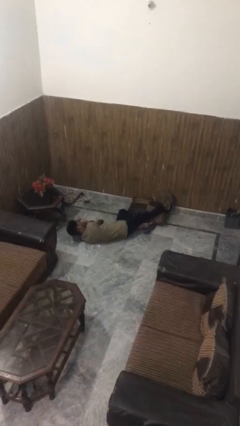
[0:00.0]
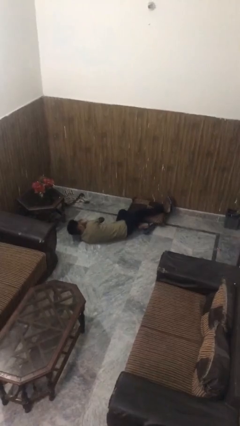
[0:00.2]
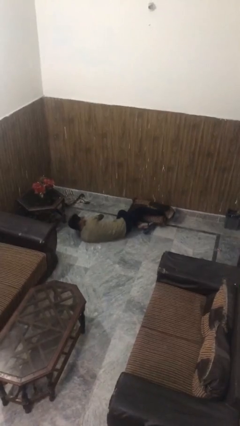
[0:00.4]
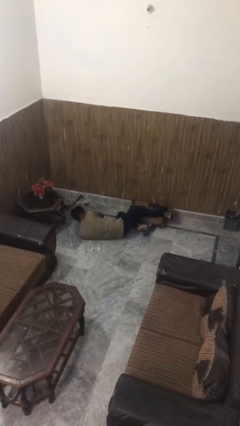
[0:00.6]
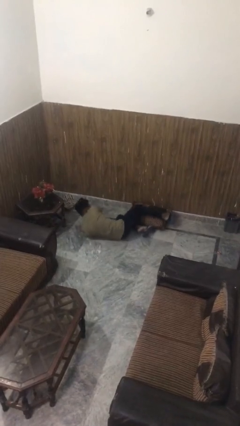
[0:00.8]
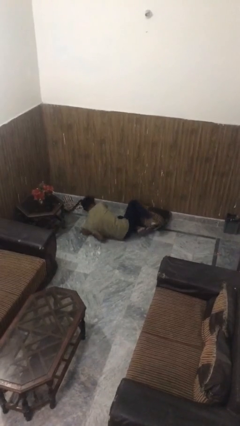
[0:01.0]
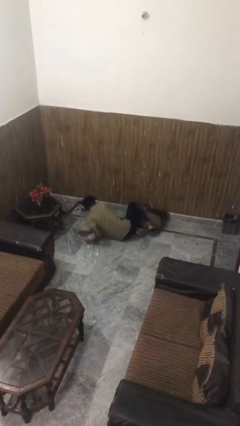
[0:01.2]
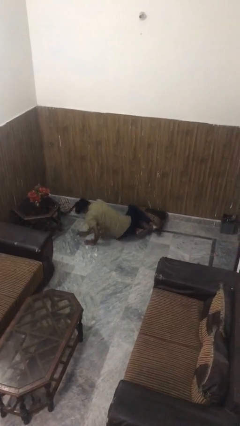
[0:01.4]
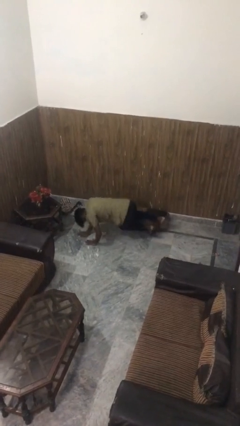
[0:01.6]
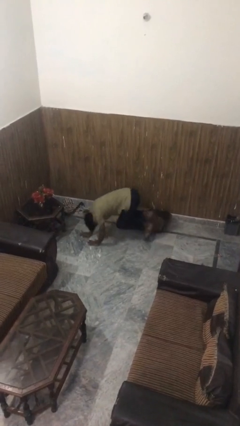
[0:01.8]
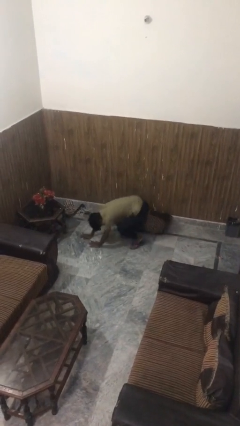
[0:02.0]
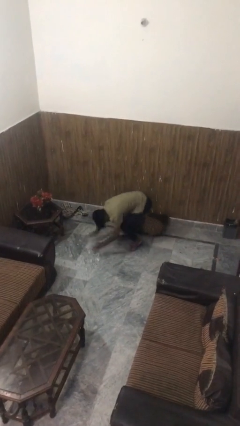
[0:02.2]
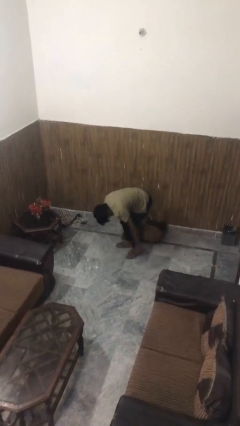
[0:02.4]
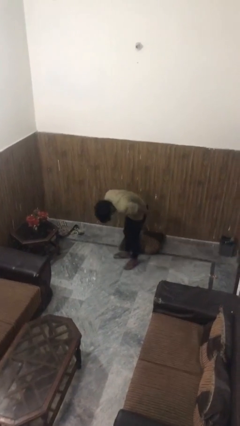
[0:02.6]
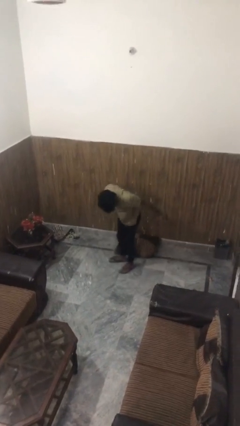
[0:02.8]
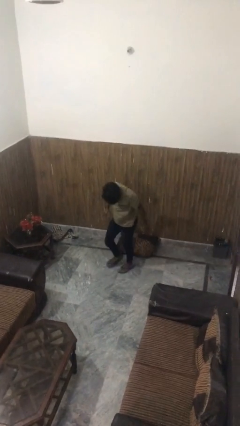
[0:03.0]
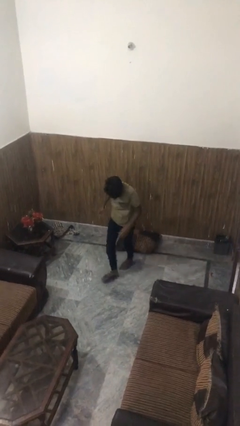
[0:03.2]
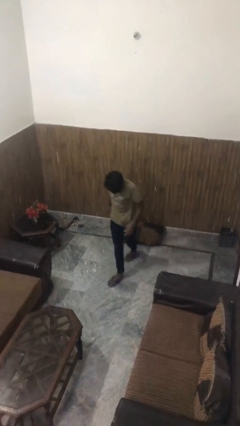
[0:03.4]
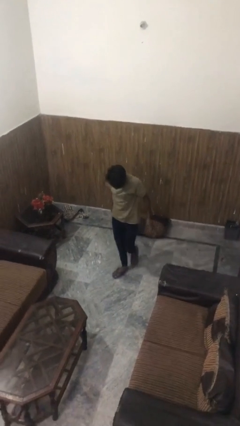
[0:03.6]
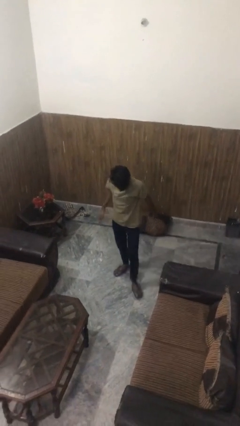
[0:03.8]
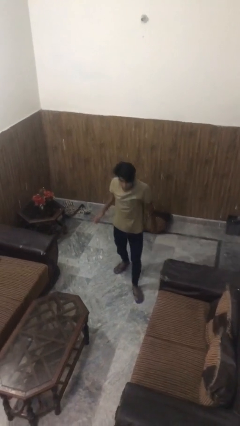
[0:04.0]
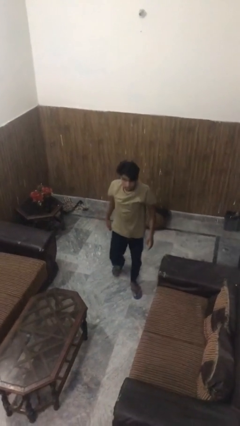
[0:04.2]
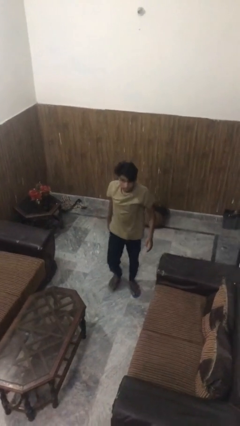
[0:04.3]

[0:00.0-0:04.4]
person stands up from floor

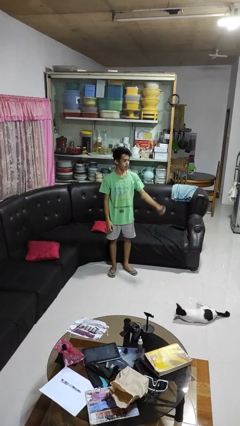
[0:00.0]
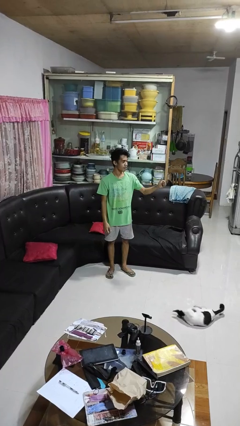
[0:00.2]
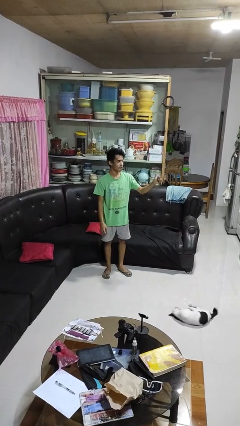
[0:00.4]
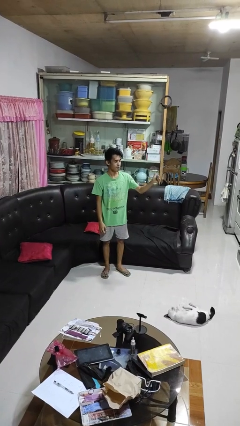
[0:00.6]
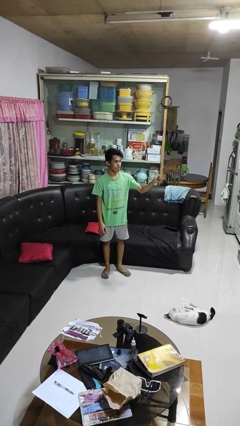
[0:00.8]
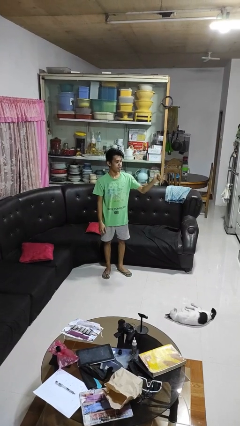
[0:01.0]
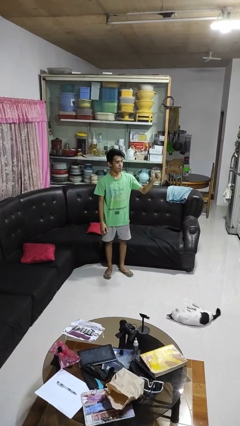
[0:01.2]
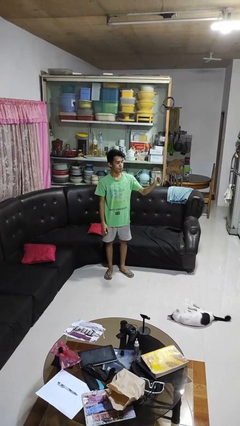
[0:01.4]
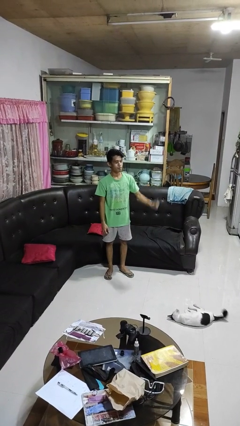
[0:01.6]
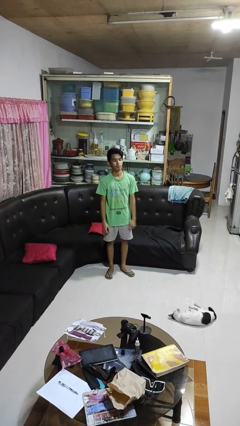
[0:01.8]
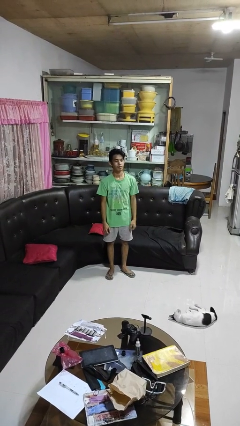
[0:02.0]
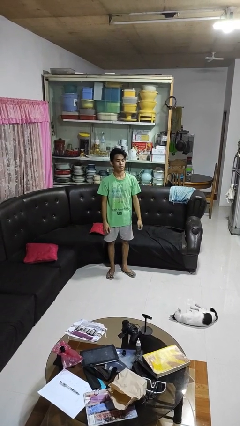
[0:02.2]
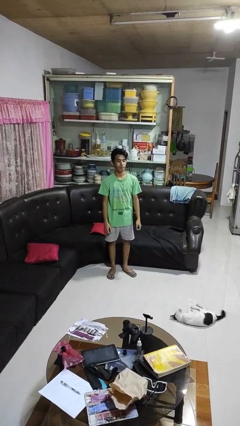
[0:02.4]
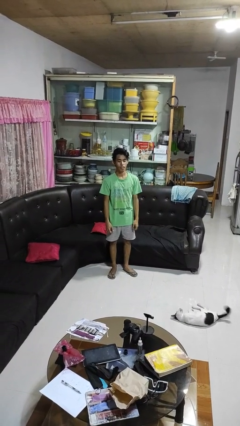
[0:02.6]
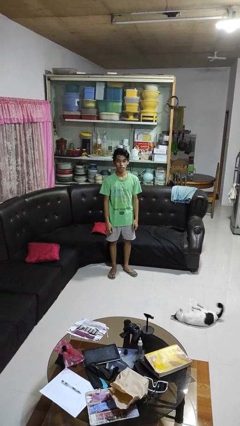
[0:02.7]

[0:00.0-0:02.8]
person gestures thumbs up

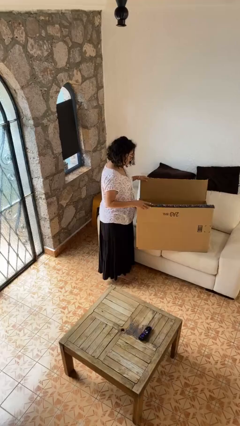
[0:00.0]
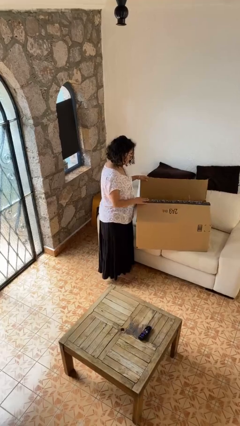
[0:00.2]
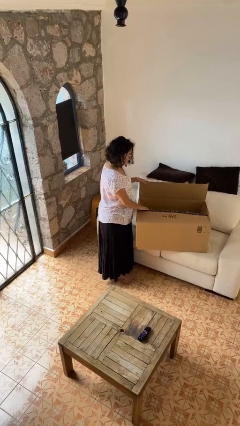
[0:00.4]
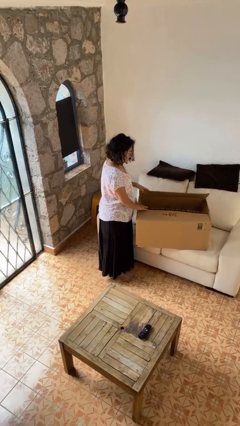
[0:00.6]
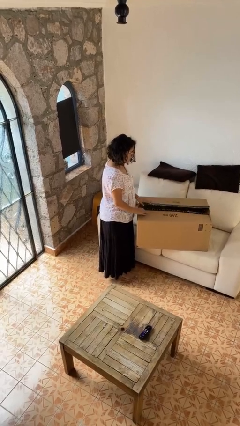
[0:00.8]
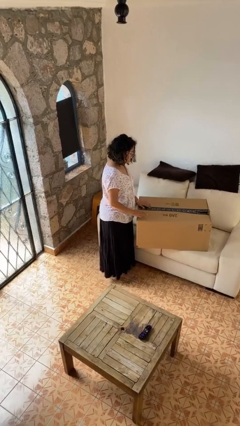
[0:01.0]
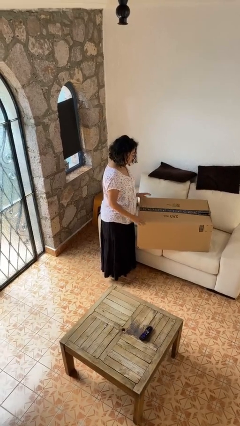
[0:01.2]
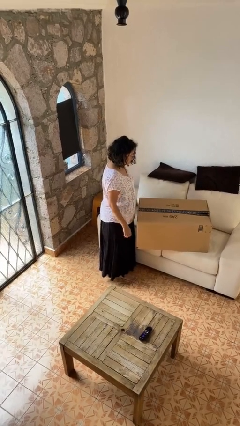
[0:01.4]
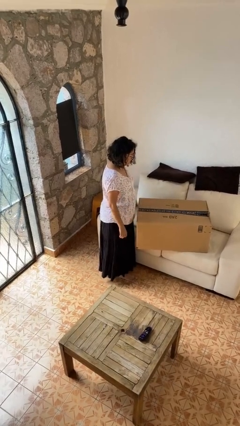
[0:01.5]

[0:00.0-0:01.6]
person closes box

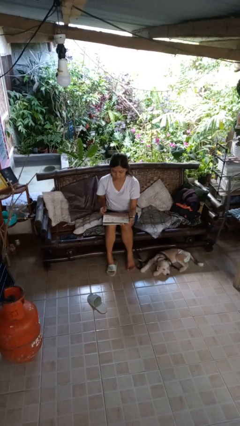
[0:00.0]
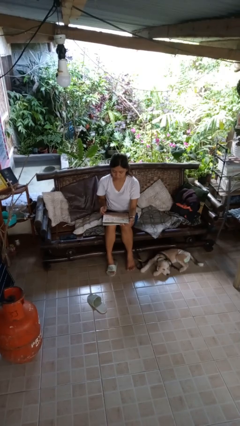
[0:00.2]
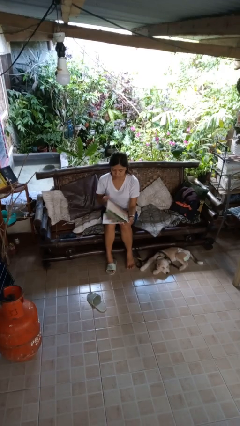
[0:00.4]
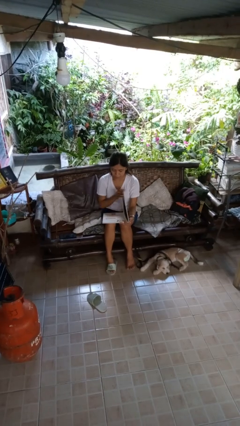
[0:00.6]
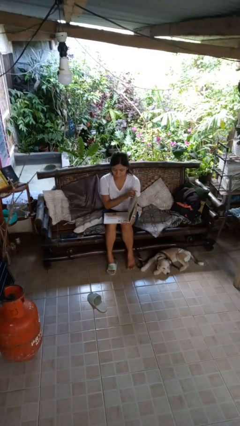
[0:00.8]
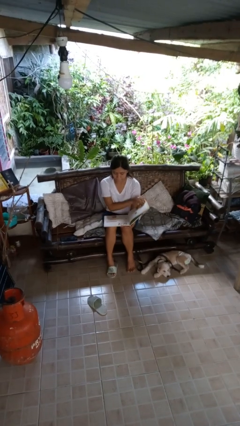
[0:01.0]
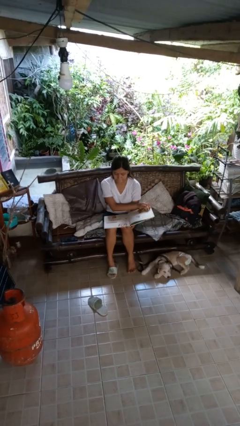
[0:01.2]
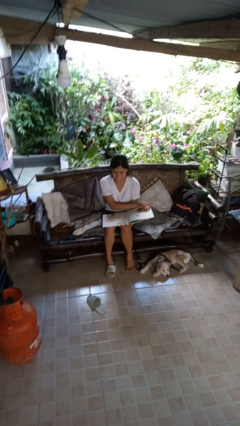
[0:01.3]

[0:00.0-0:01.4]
person reads book

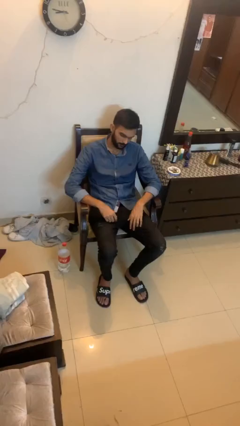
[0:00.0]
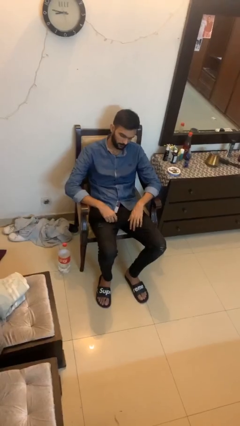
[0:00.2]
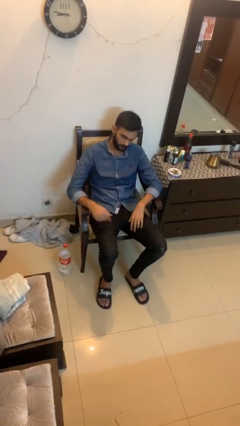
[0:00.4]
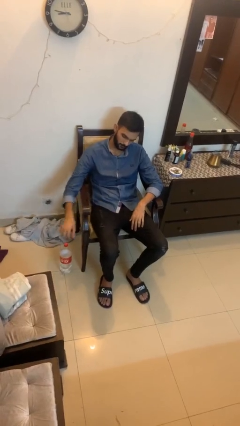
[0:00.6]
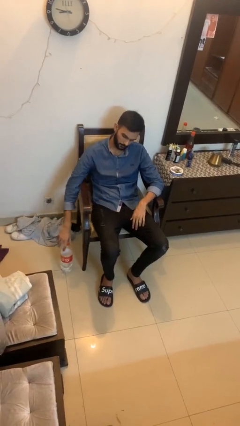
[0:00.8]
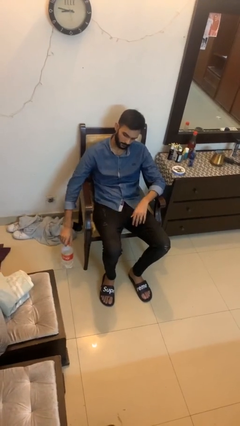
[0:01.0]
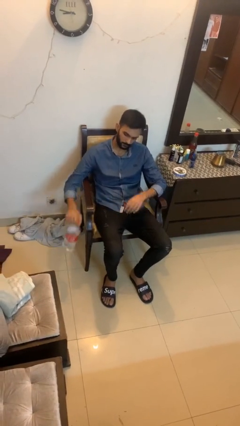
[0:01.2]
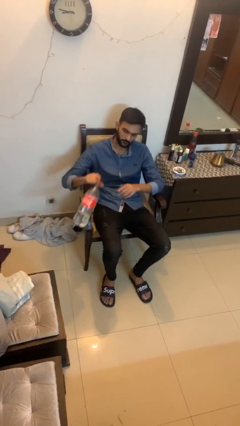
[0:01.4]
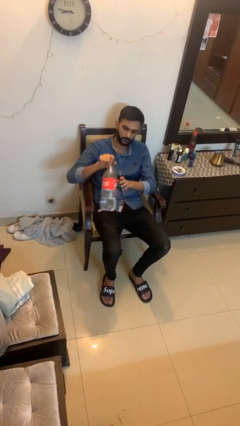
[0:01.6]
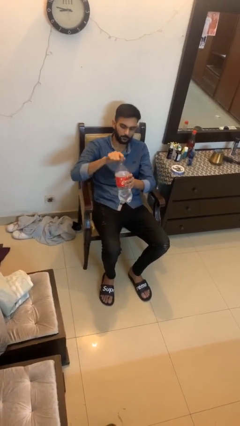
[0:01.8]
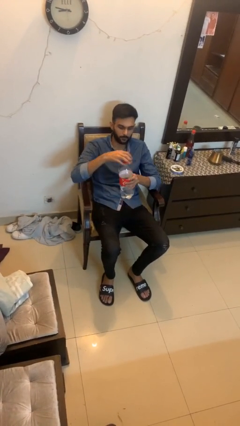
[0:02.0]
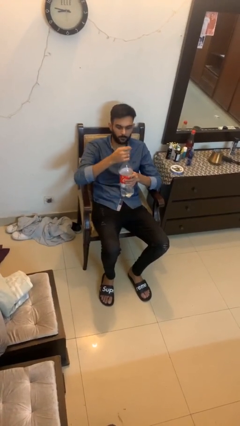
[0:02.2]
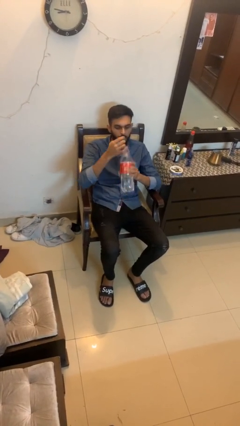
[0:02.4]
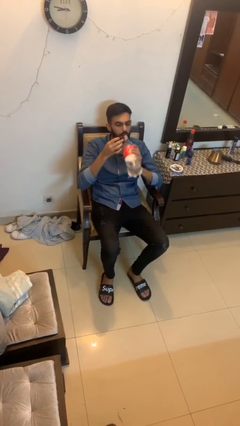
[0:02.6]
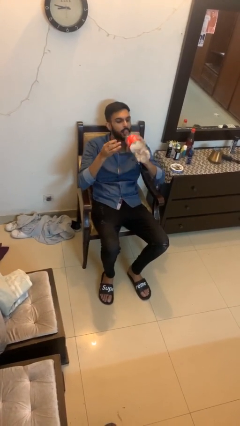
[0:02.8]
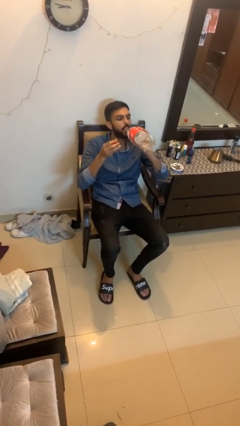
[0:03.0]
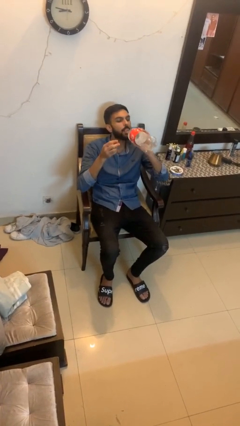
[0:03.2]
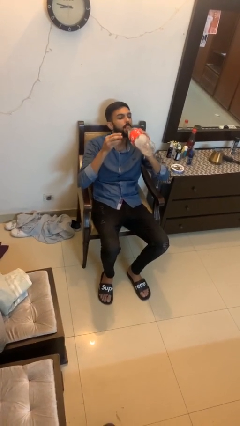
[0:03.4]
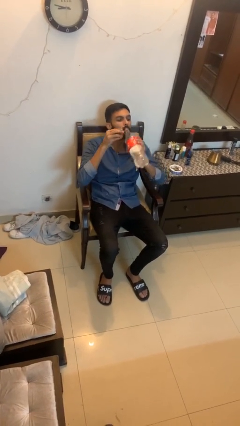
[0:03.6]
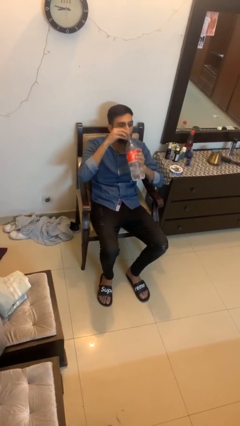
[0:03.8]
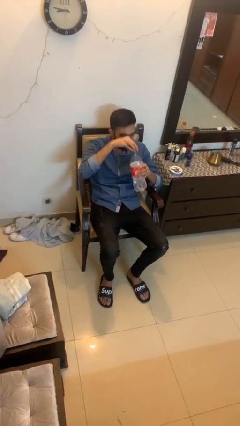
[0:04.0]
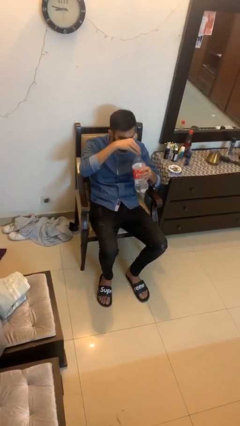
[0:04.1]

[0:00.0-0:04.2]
person picks up object from floor

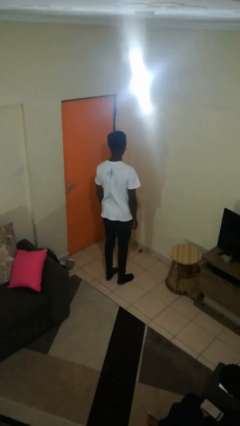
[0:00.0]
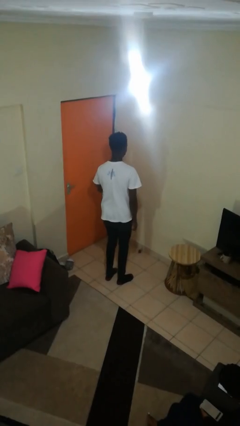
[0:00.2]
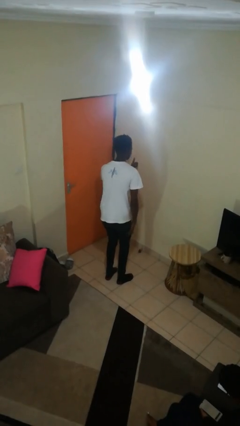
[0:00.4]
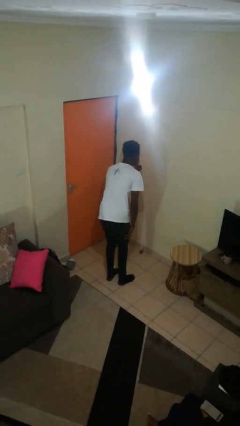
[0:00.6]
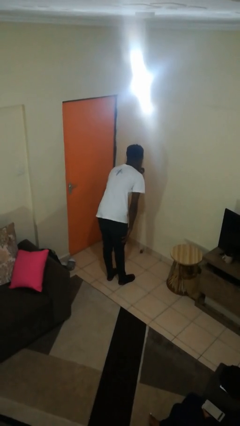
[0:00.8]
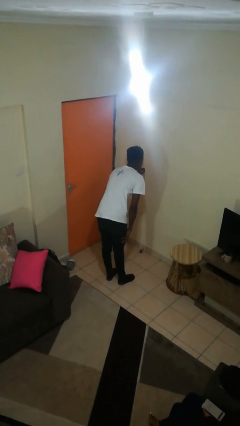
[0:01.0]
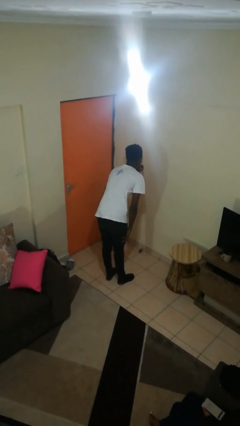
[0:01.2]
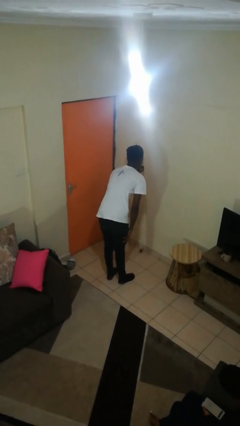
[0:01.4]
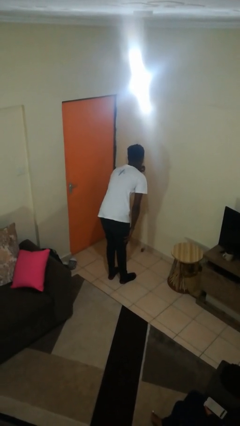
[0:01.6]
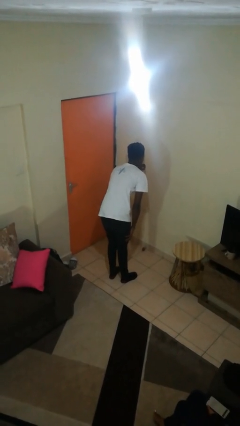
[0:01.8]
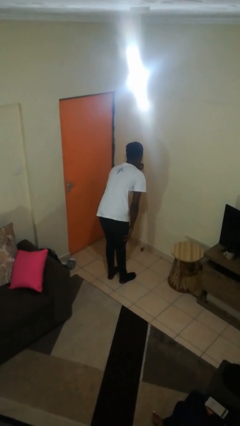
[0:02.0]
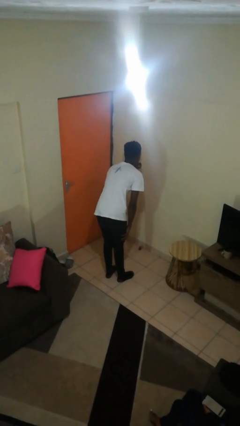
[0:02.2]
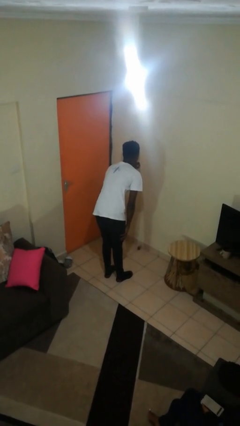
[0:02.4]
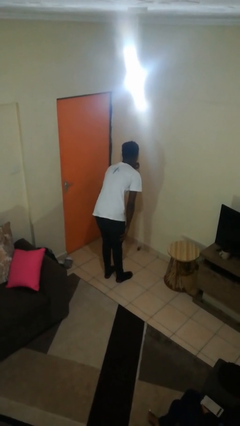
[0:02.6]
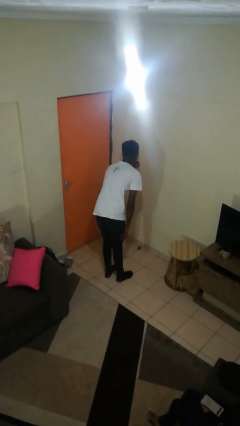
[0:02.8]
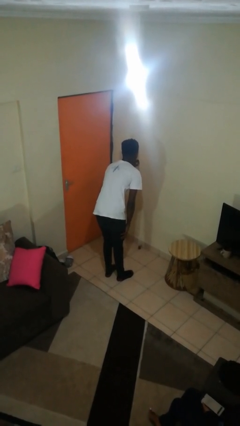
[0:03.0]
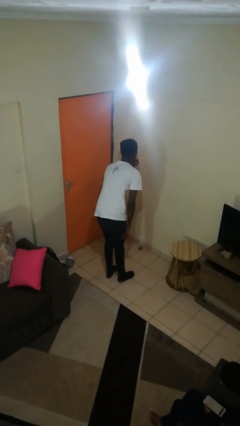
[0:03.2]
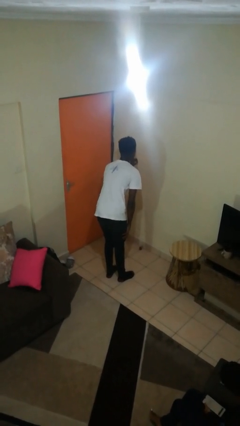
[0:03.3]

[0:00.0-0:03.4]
person gestures be quiet
